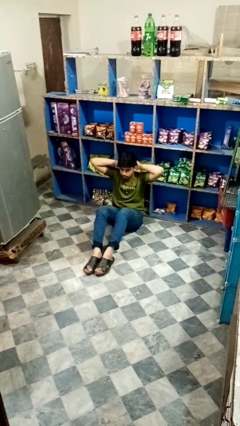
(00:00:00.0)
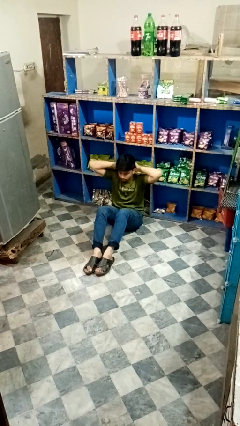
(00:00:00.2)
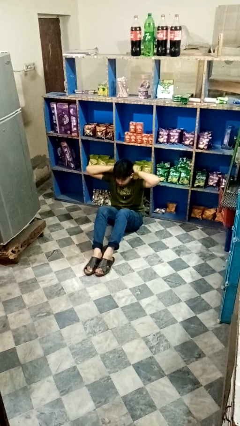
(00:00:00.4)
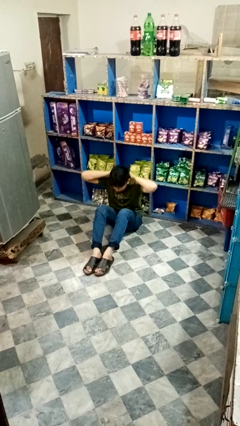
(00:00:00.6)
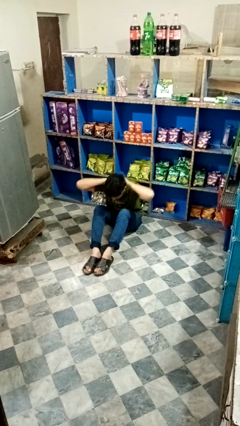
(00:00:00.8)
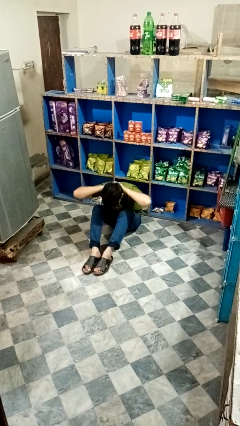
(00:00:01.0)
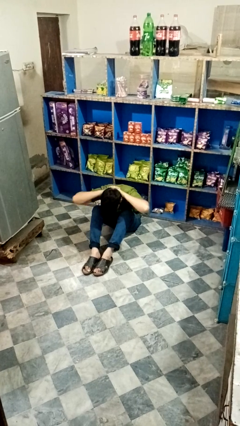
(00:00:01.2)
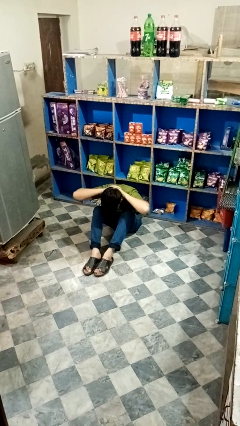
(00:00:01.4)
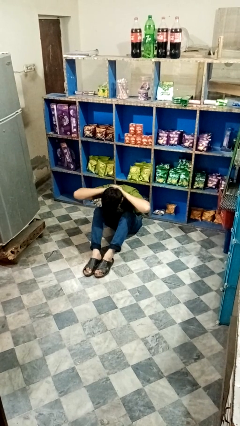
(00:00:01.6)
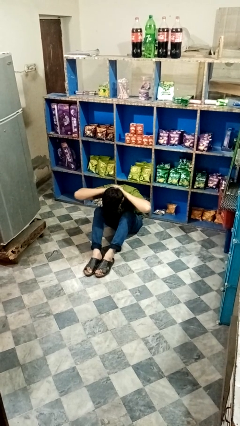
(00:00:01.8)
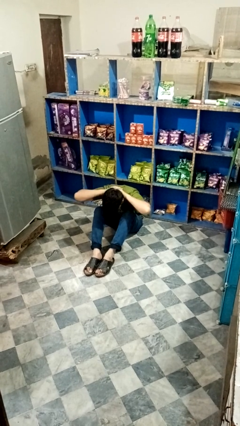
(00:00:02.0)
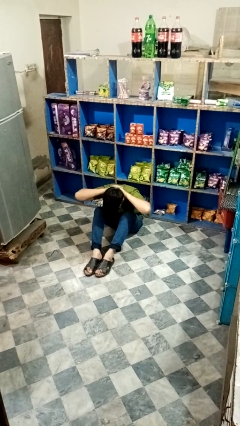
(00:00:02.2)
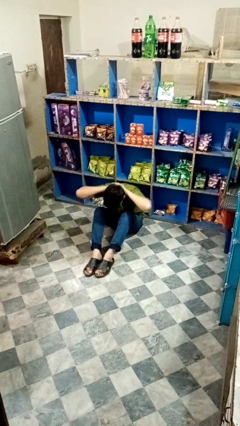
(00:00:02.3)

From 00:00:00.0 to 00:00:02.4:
person exercises with situp

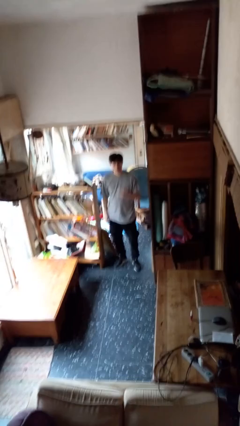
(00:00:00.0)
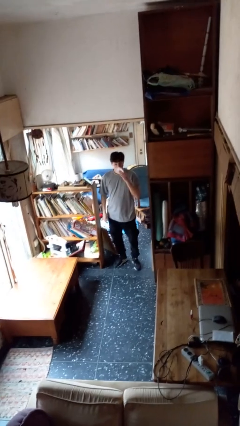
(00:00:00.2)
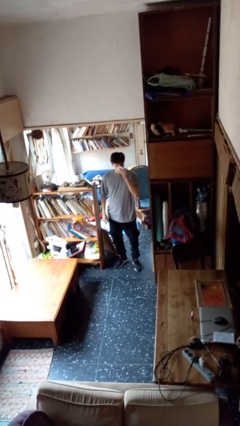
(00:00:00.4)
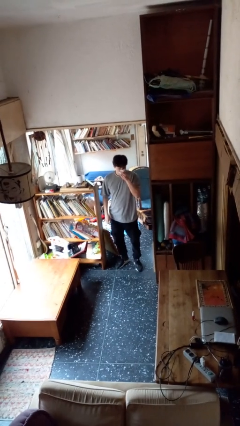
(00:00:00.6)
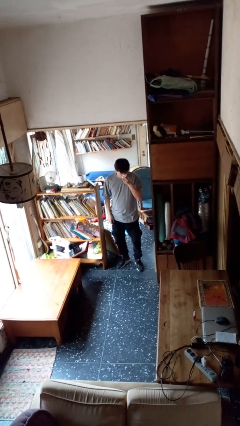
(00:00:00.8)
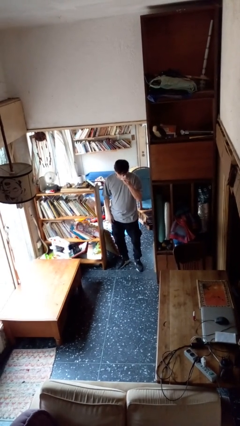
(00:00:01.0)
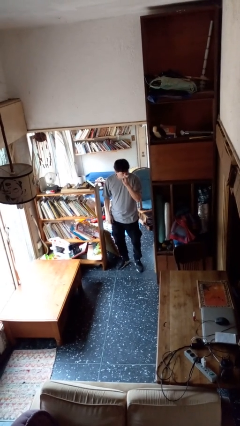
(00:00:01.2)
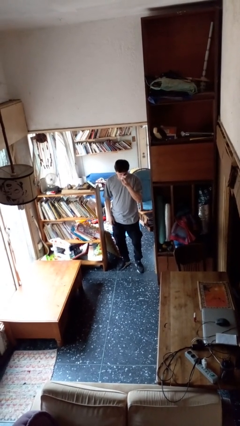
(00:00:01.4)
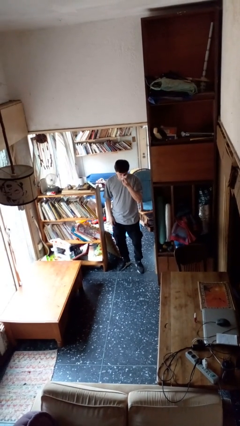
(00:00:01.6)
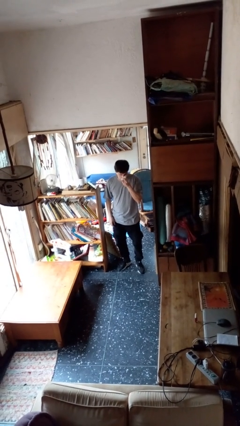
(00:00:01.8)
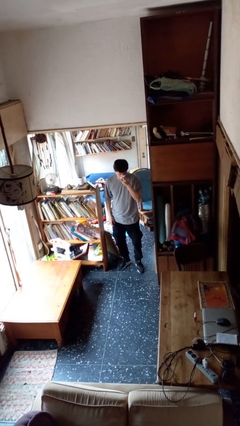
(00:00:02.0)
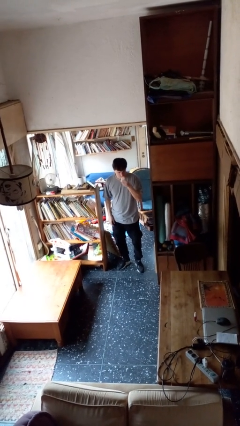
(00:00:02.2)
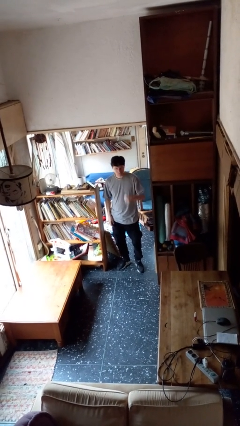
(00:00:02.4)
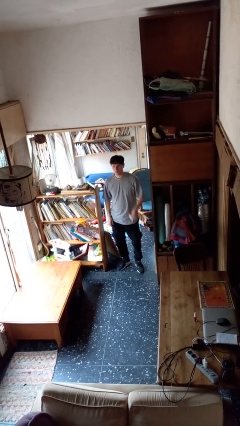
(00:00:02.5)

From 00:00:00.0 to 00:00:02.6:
person blows nose

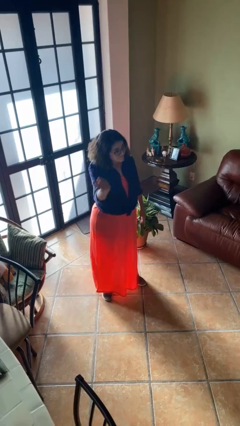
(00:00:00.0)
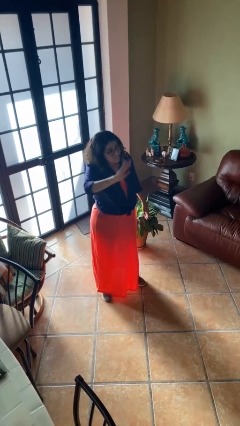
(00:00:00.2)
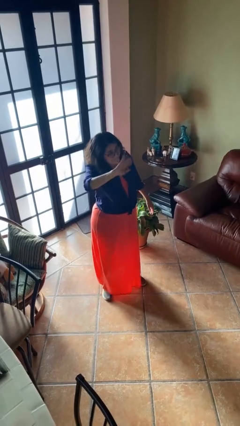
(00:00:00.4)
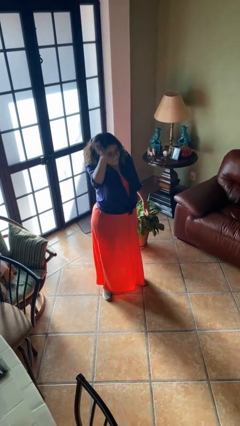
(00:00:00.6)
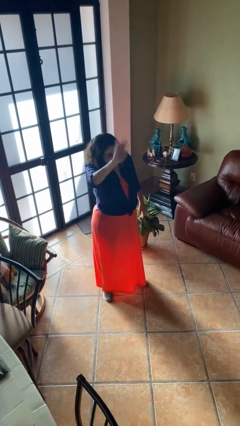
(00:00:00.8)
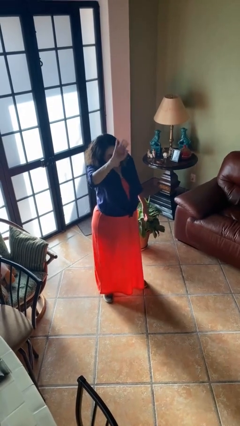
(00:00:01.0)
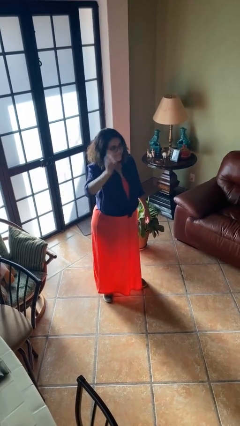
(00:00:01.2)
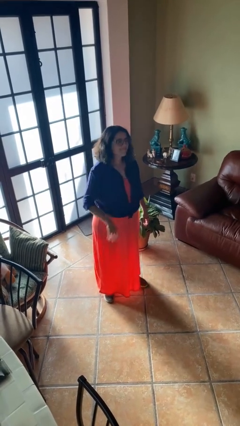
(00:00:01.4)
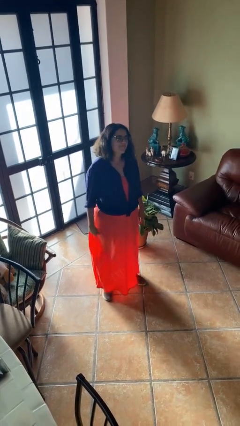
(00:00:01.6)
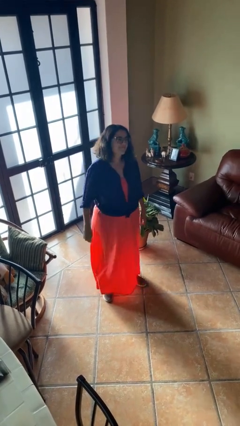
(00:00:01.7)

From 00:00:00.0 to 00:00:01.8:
person waves at person

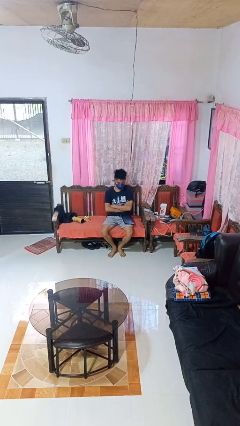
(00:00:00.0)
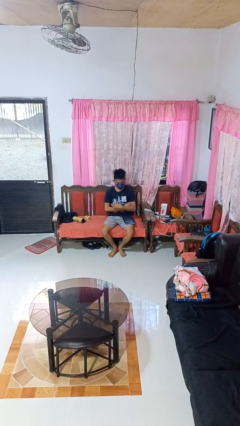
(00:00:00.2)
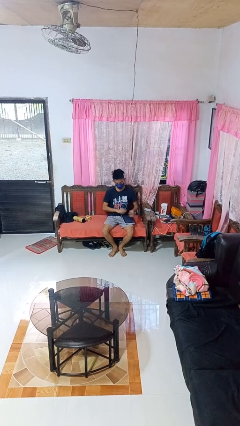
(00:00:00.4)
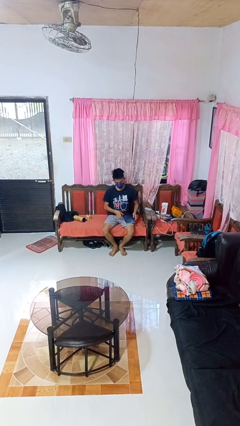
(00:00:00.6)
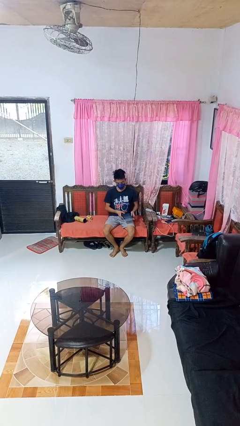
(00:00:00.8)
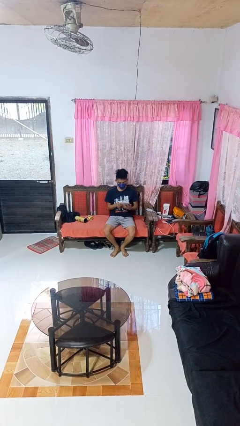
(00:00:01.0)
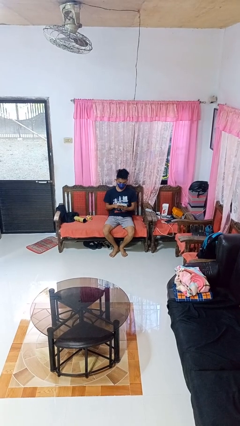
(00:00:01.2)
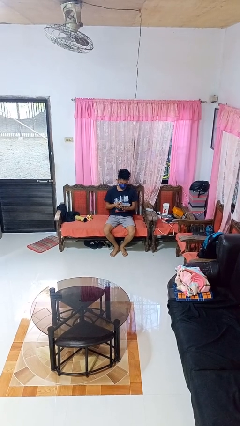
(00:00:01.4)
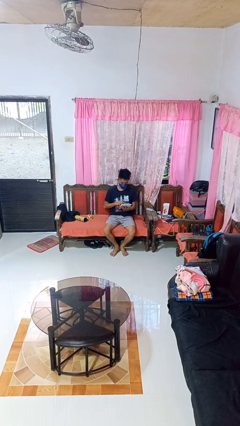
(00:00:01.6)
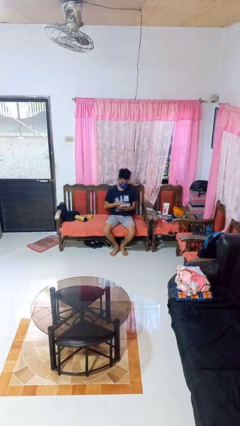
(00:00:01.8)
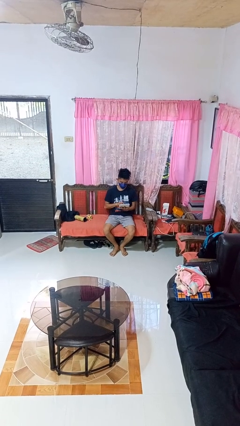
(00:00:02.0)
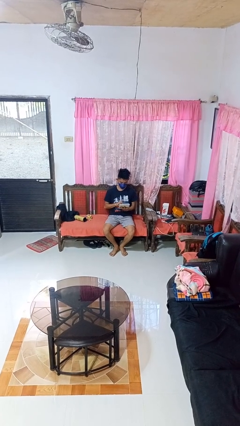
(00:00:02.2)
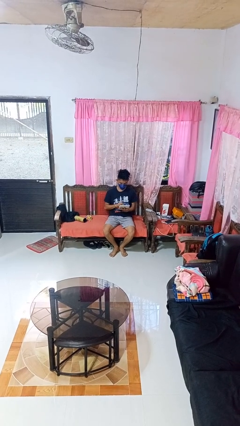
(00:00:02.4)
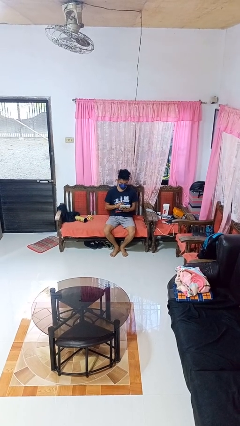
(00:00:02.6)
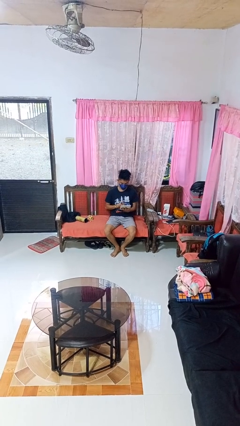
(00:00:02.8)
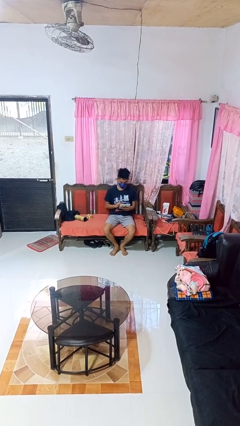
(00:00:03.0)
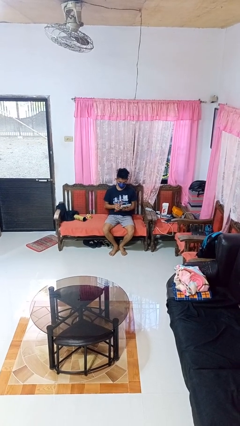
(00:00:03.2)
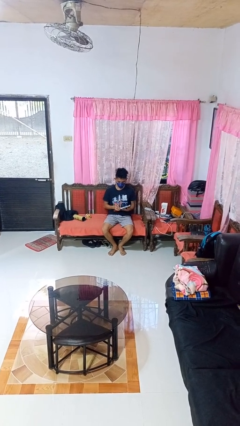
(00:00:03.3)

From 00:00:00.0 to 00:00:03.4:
person interacts with tablet

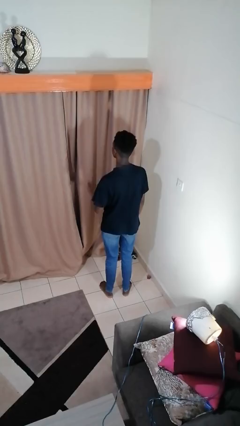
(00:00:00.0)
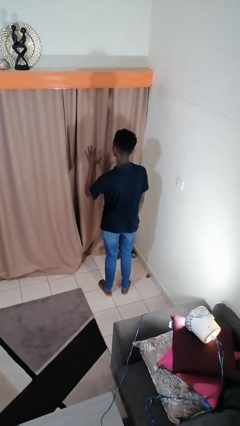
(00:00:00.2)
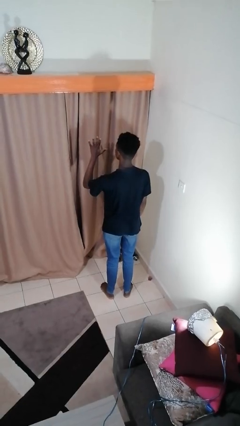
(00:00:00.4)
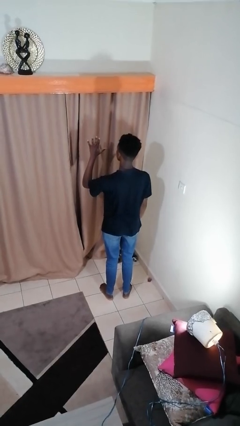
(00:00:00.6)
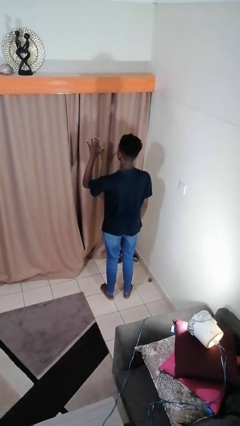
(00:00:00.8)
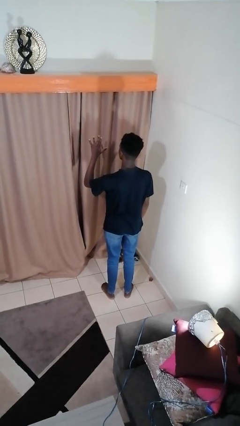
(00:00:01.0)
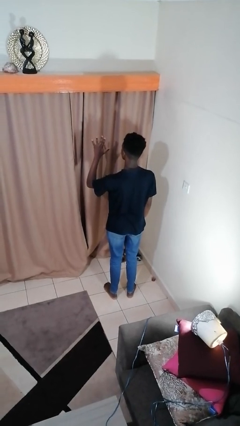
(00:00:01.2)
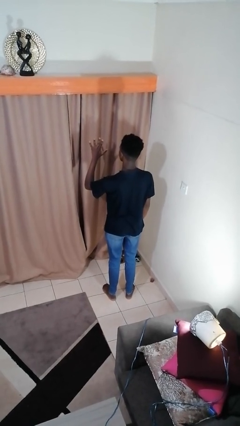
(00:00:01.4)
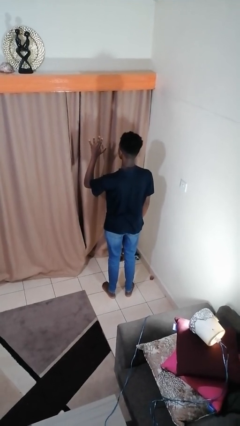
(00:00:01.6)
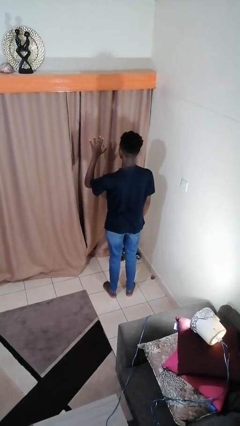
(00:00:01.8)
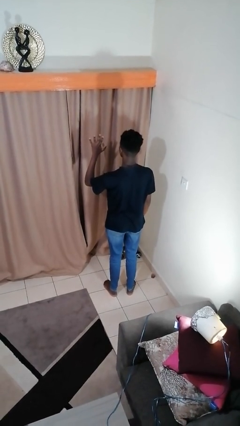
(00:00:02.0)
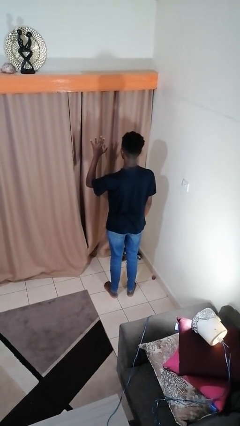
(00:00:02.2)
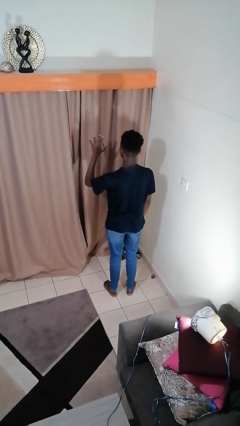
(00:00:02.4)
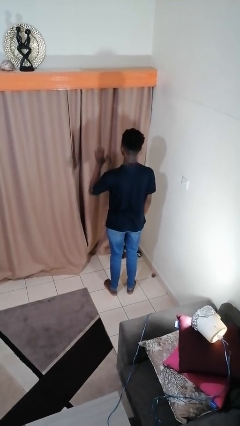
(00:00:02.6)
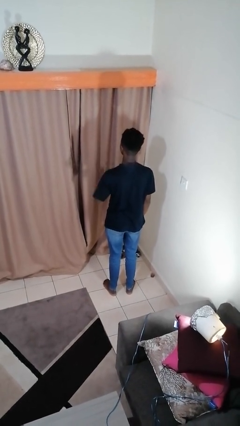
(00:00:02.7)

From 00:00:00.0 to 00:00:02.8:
person gestures number five

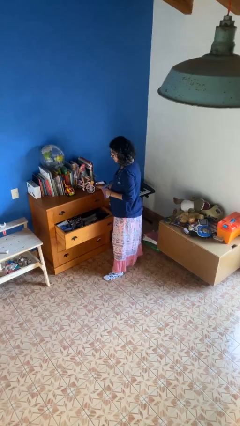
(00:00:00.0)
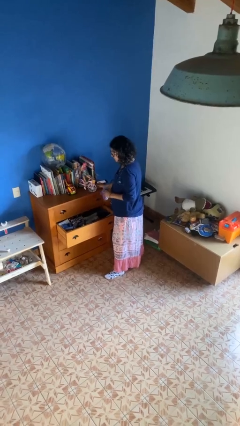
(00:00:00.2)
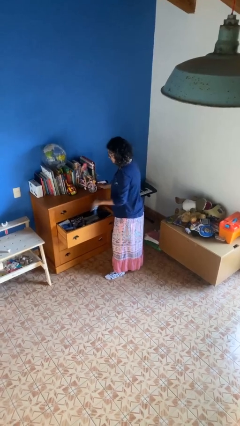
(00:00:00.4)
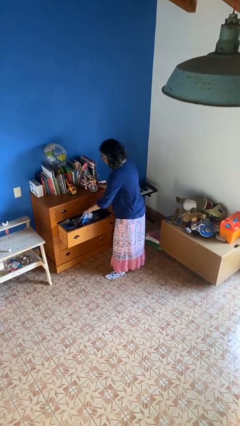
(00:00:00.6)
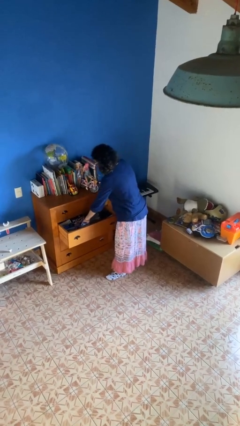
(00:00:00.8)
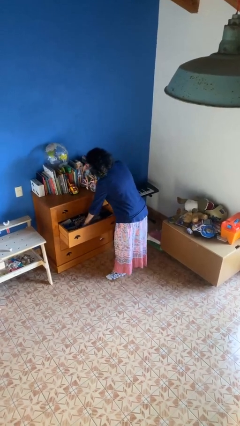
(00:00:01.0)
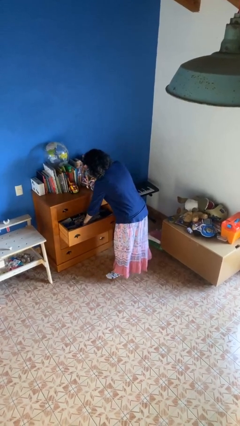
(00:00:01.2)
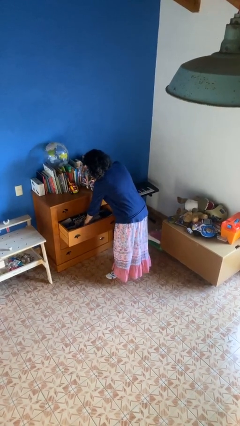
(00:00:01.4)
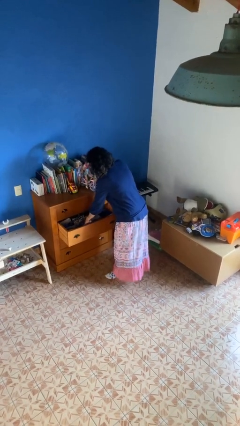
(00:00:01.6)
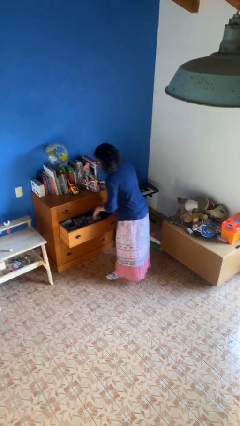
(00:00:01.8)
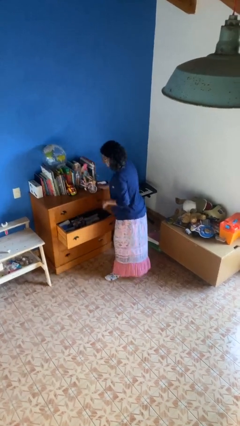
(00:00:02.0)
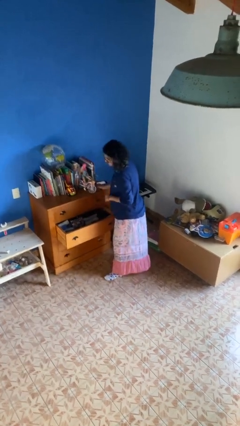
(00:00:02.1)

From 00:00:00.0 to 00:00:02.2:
person puts clothes into dresser

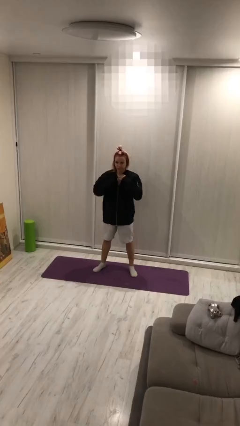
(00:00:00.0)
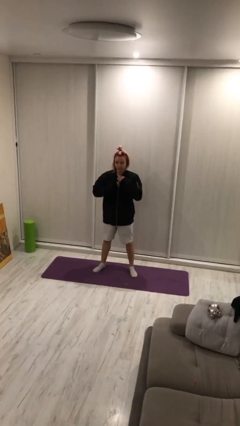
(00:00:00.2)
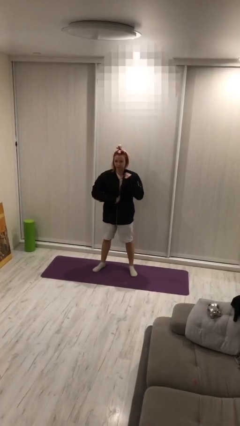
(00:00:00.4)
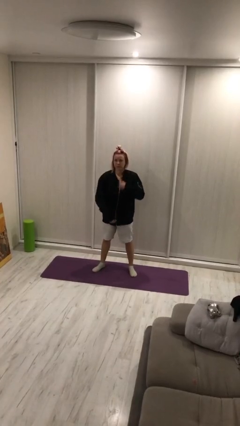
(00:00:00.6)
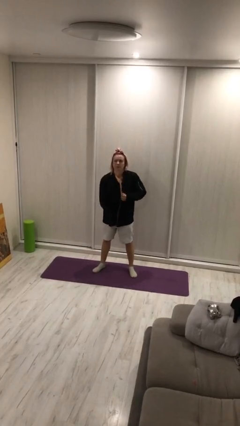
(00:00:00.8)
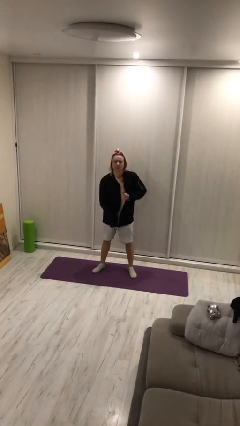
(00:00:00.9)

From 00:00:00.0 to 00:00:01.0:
person unzips jacket

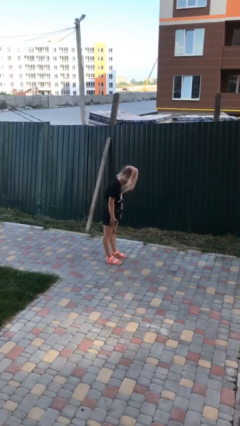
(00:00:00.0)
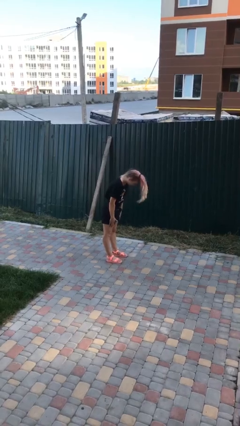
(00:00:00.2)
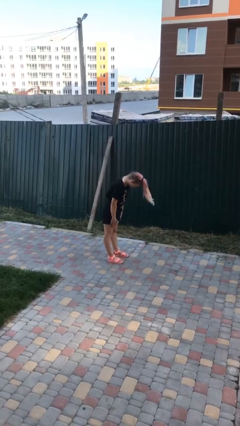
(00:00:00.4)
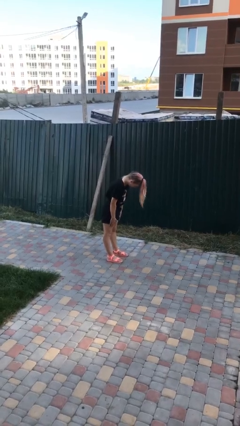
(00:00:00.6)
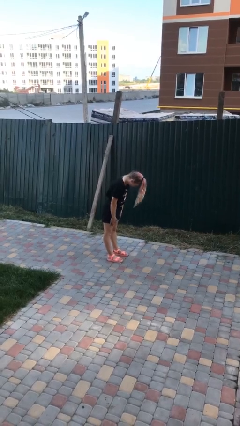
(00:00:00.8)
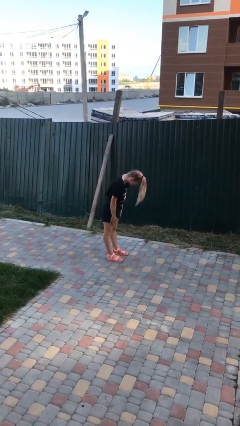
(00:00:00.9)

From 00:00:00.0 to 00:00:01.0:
person bows
